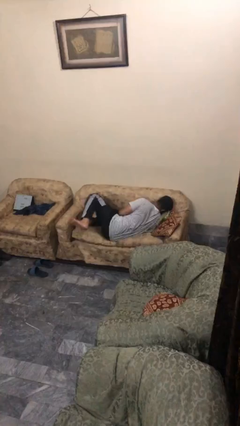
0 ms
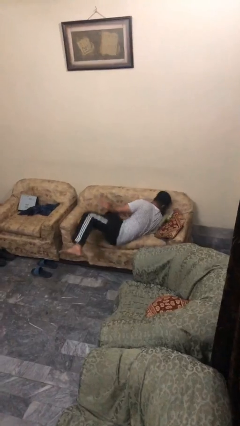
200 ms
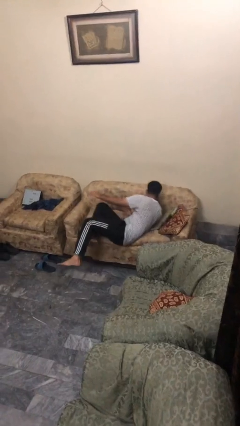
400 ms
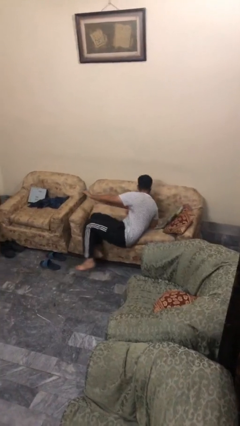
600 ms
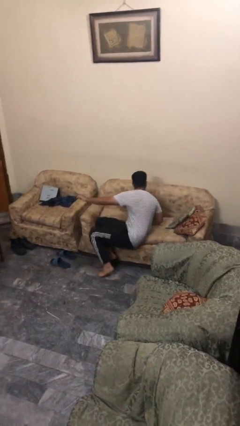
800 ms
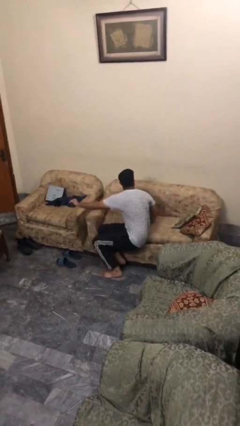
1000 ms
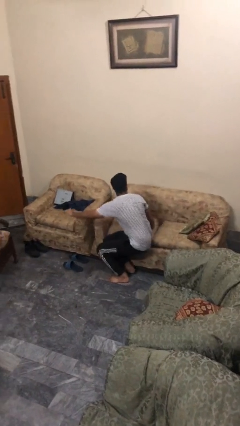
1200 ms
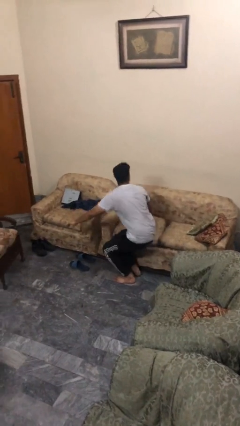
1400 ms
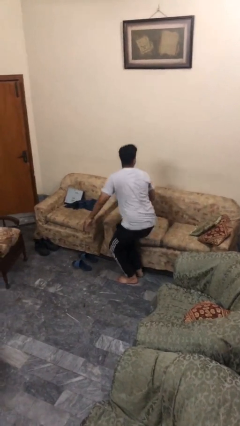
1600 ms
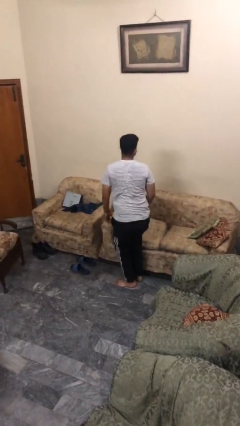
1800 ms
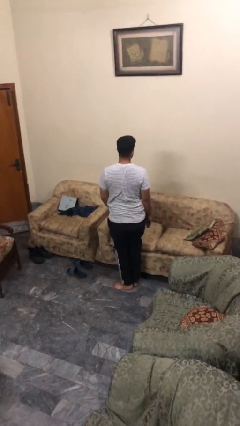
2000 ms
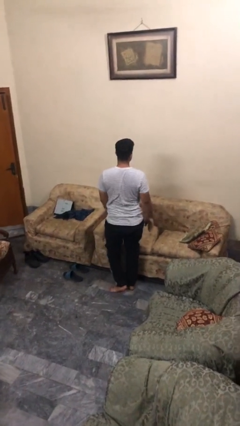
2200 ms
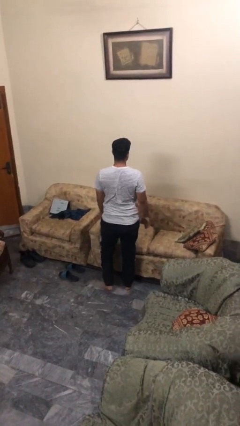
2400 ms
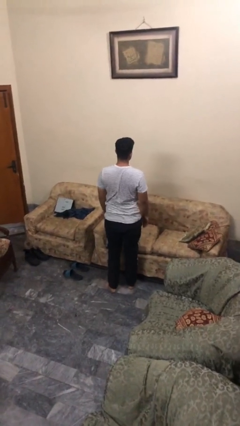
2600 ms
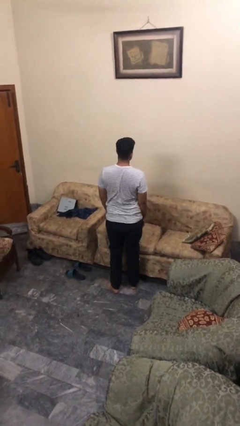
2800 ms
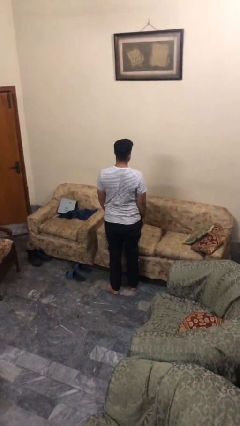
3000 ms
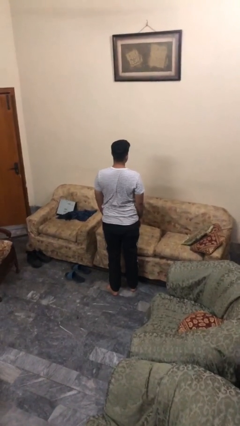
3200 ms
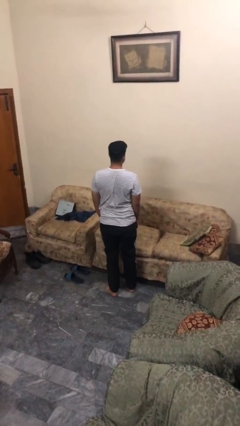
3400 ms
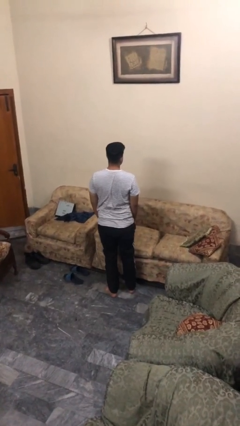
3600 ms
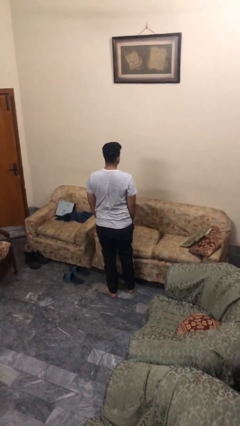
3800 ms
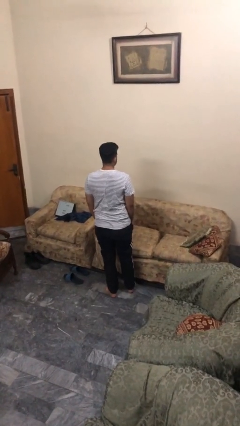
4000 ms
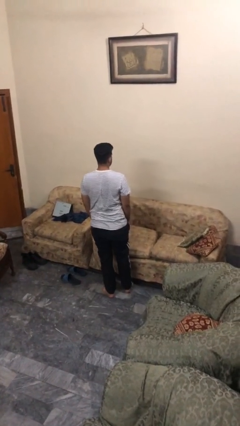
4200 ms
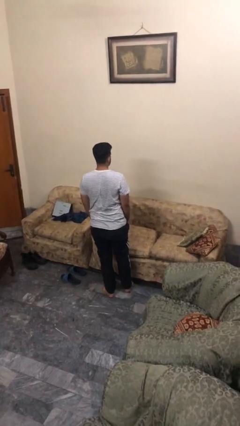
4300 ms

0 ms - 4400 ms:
person stands up

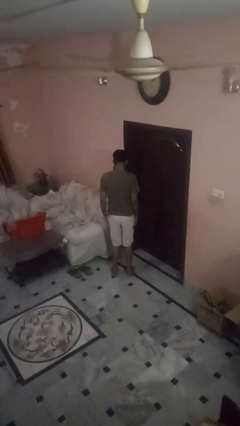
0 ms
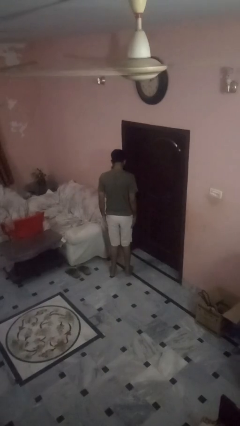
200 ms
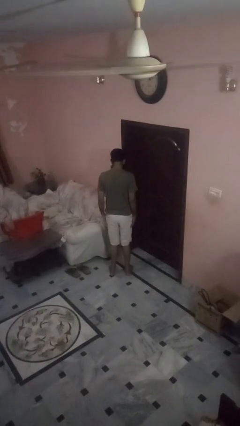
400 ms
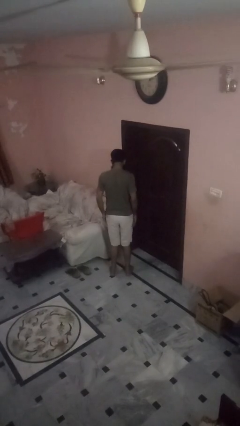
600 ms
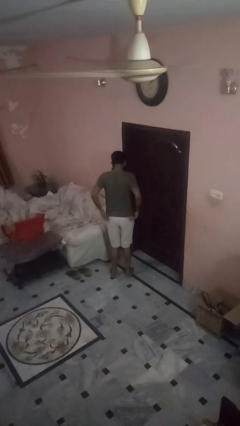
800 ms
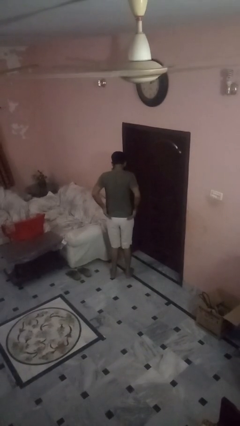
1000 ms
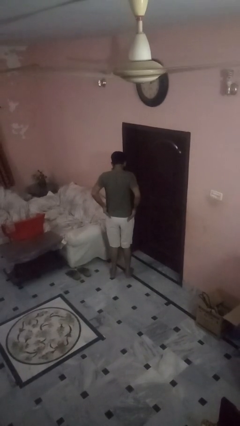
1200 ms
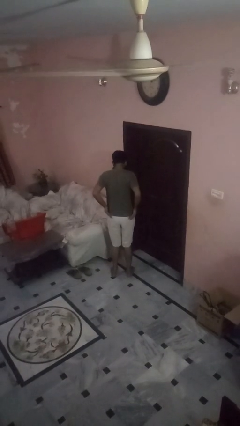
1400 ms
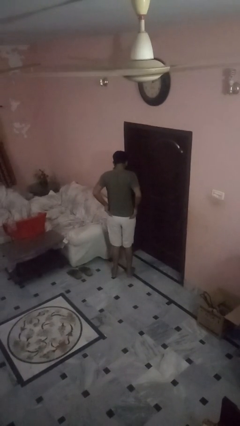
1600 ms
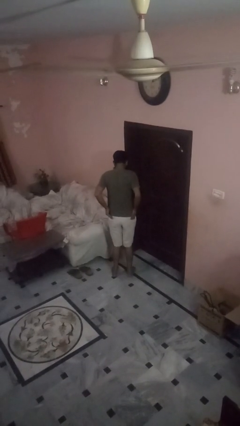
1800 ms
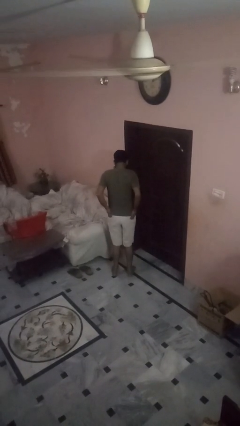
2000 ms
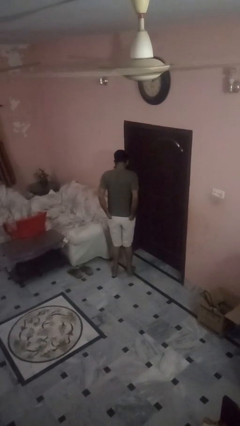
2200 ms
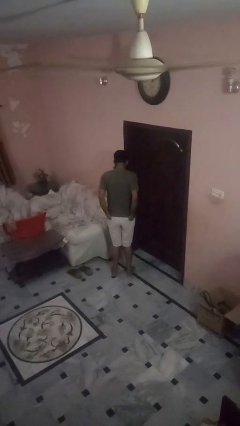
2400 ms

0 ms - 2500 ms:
person puts hands in back pockets

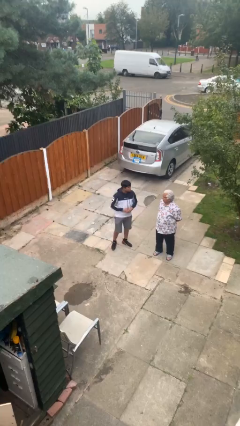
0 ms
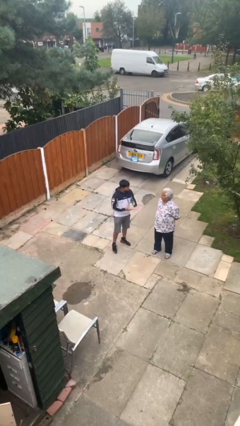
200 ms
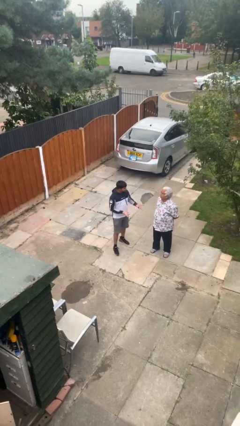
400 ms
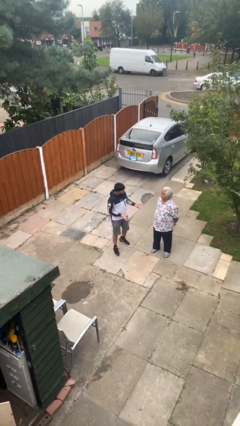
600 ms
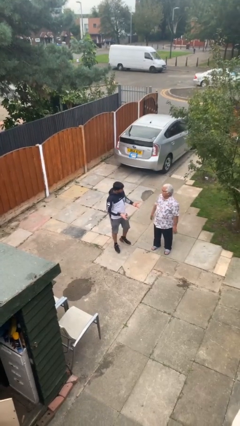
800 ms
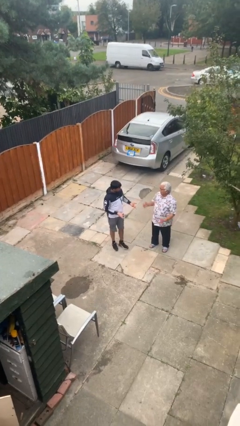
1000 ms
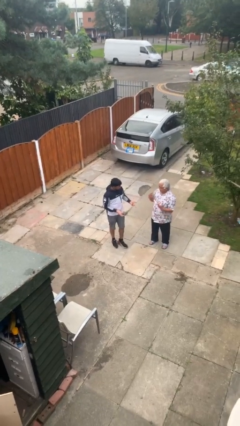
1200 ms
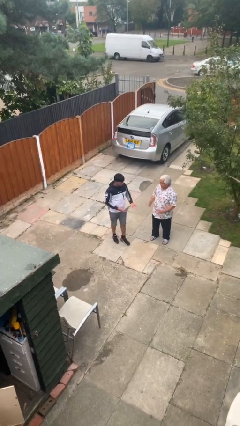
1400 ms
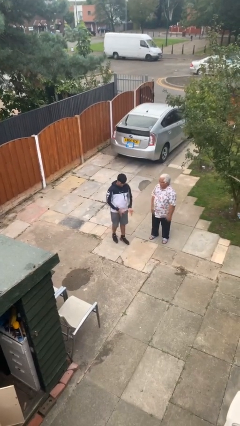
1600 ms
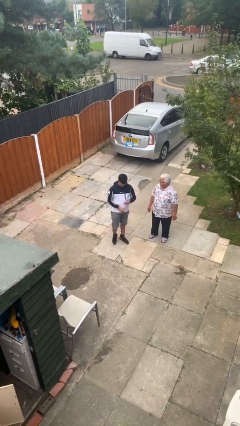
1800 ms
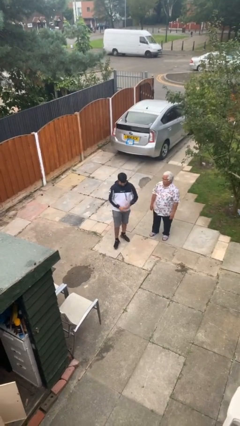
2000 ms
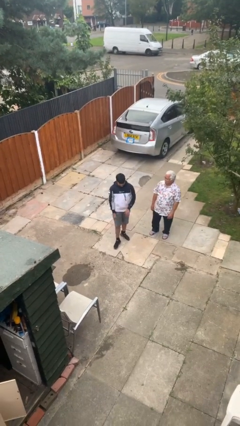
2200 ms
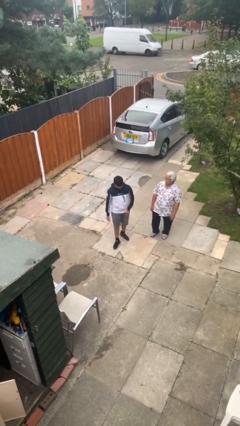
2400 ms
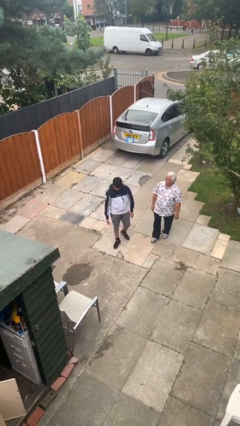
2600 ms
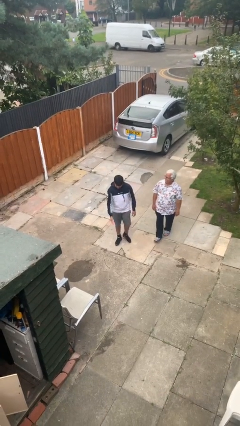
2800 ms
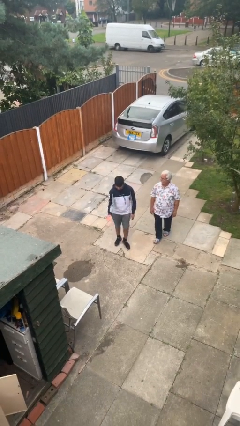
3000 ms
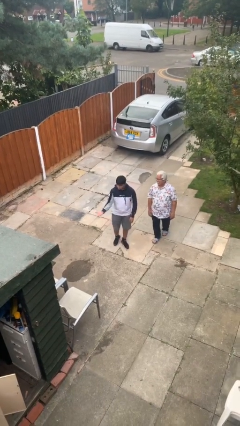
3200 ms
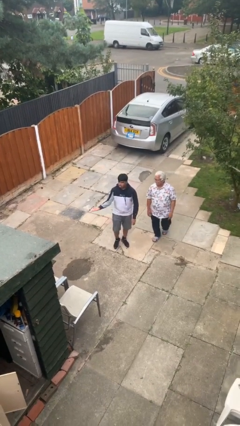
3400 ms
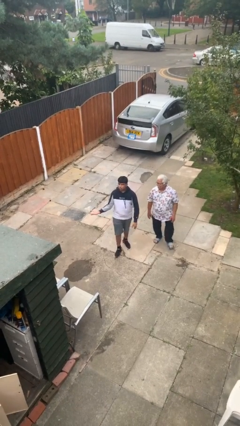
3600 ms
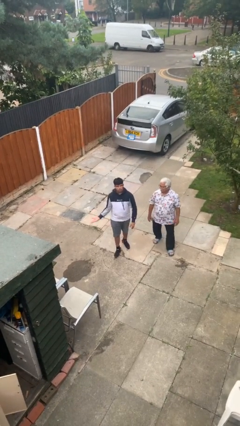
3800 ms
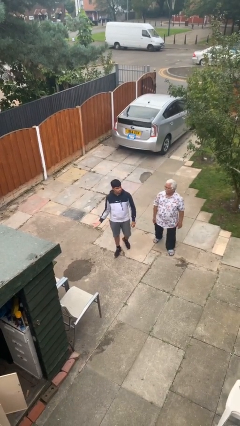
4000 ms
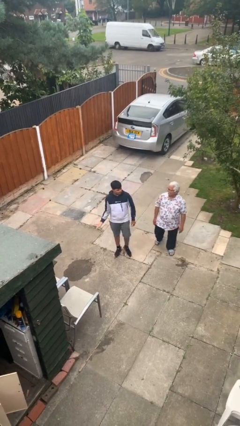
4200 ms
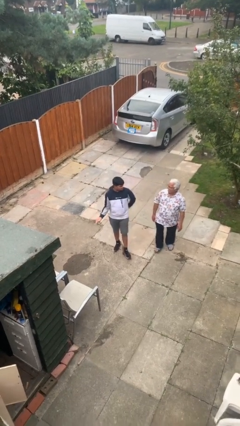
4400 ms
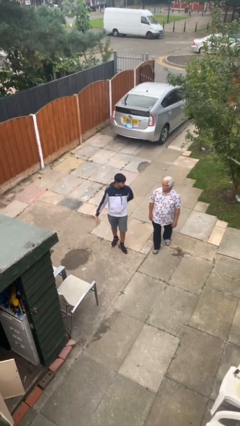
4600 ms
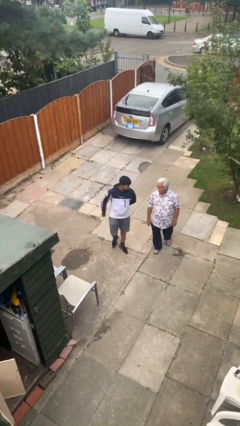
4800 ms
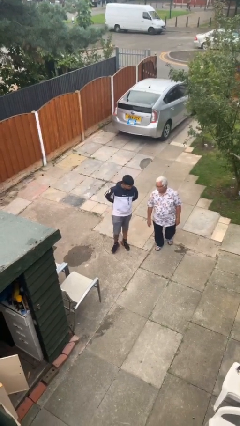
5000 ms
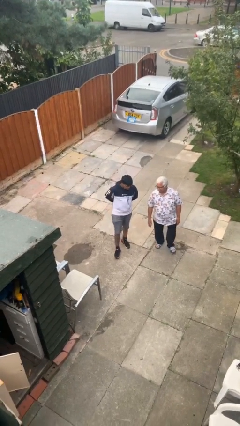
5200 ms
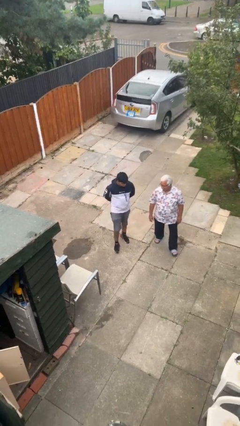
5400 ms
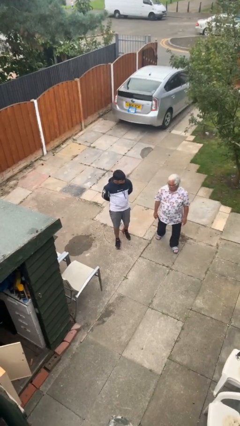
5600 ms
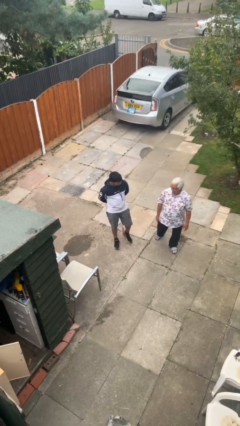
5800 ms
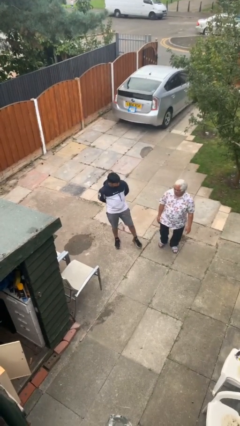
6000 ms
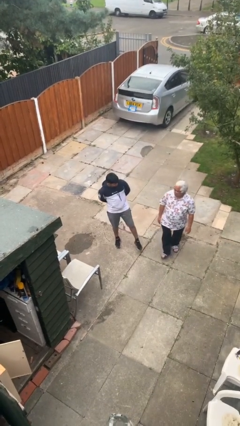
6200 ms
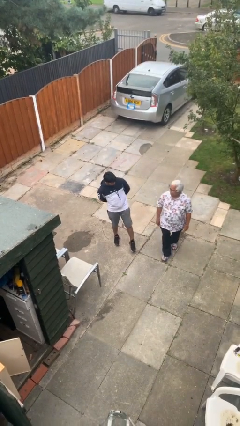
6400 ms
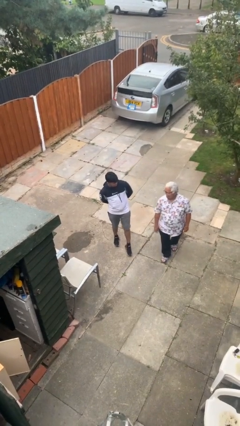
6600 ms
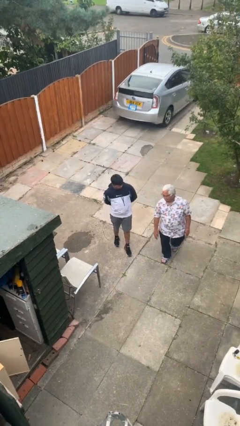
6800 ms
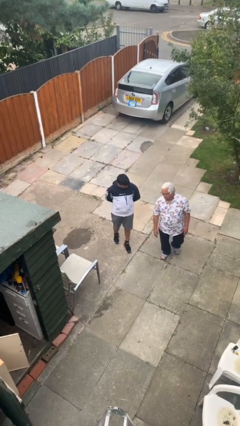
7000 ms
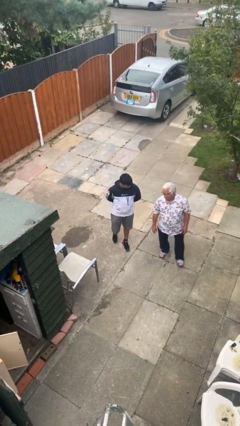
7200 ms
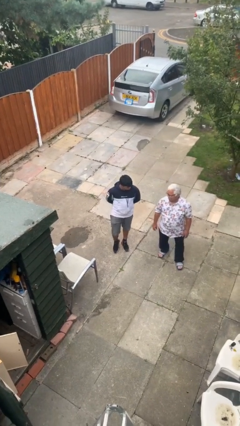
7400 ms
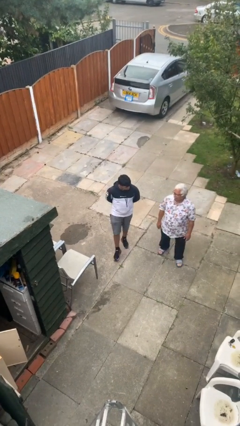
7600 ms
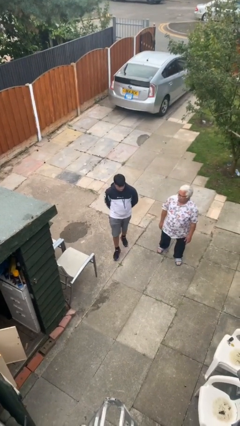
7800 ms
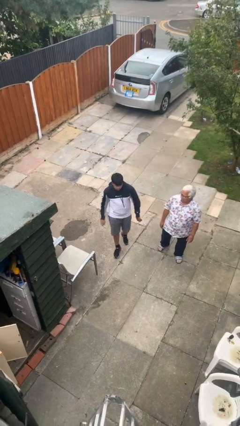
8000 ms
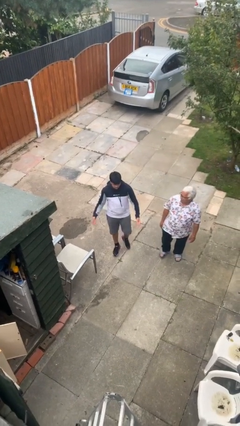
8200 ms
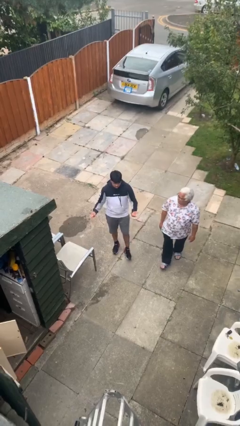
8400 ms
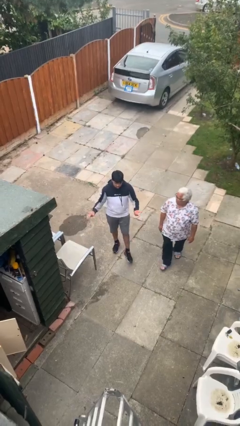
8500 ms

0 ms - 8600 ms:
person talks to person

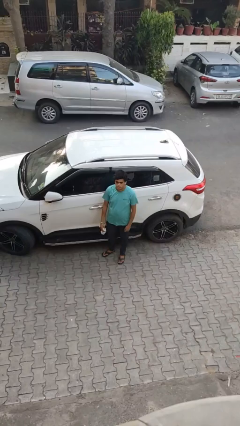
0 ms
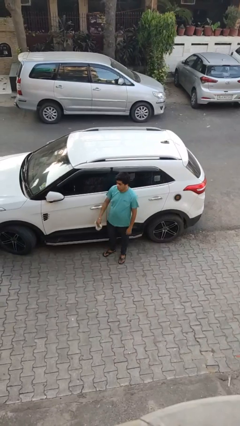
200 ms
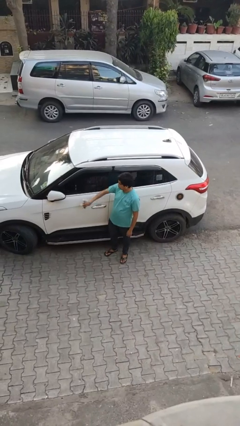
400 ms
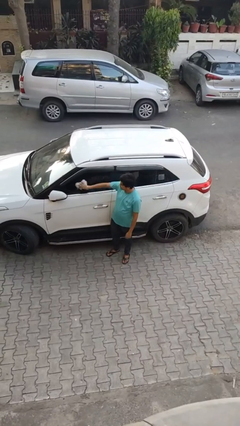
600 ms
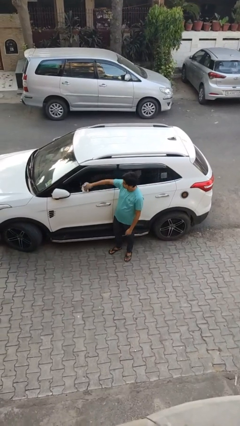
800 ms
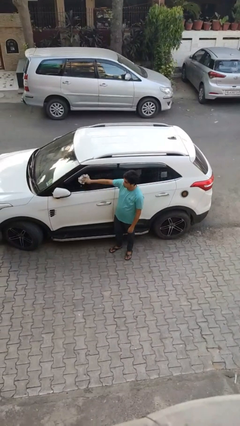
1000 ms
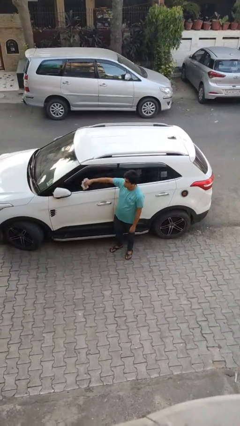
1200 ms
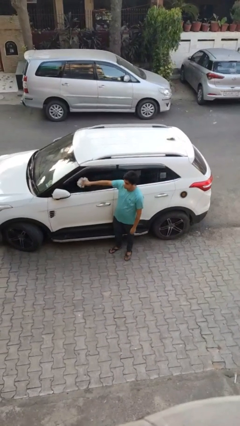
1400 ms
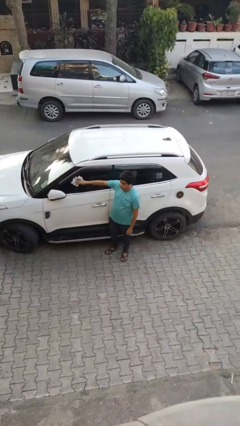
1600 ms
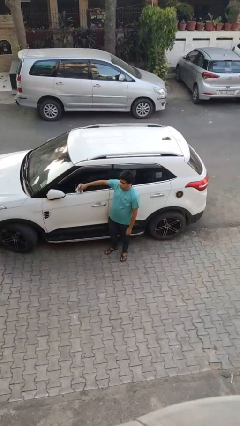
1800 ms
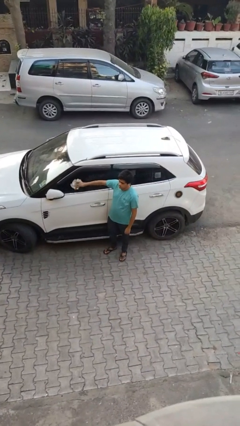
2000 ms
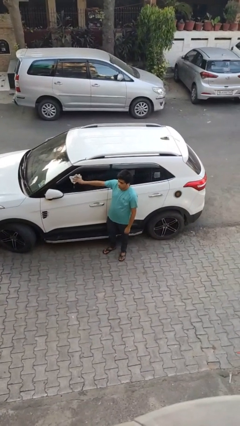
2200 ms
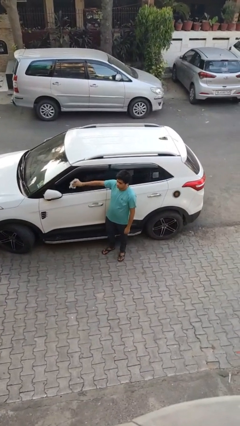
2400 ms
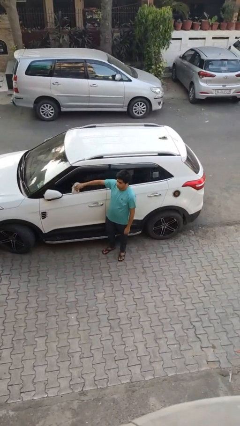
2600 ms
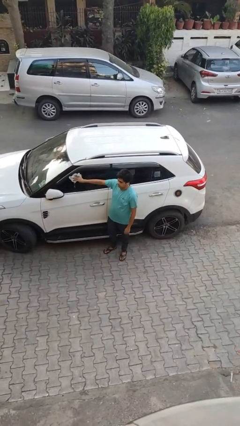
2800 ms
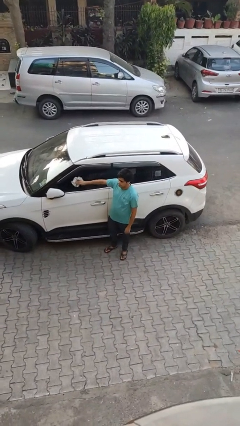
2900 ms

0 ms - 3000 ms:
person polishes car with rag
